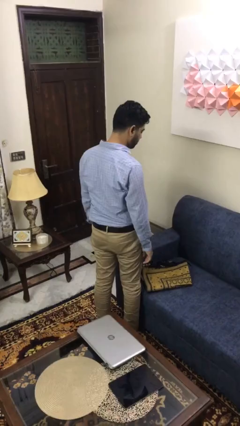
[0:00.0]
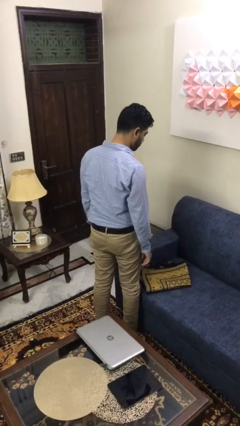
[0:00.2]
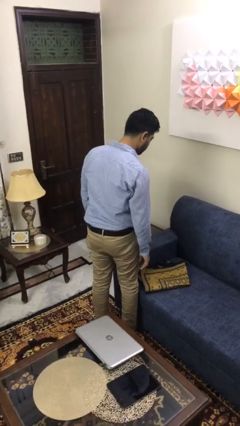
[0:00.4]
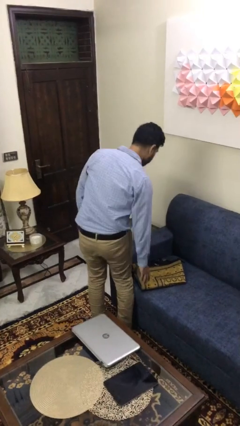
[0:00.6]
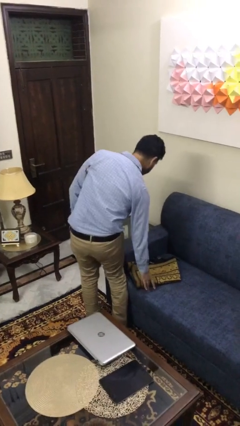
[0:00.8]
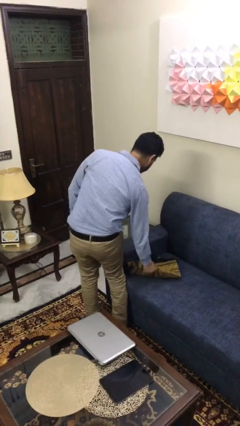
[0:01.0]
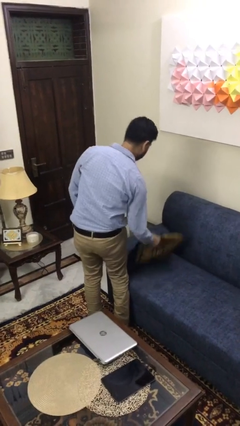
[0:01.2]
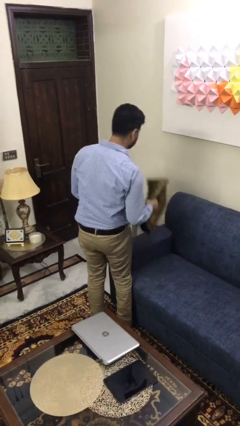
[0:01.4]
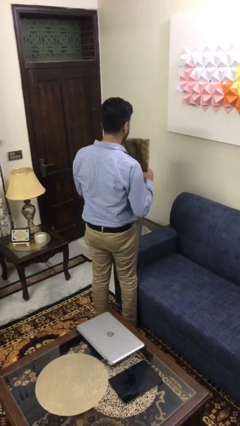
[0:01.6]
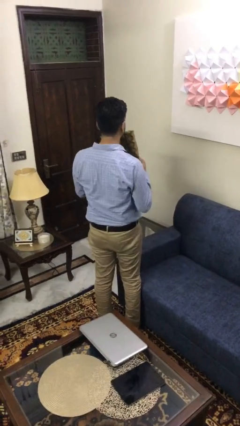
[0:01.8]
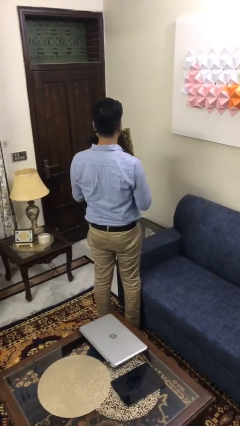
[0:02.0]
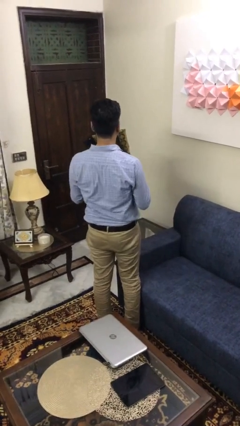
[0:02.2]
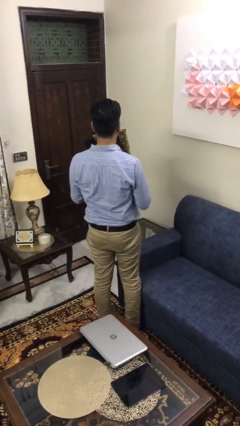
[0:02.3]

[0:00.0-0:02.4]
person picks up object from couch

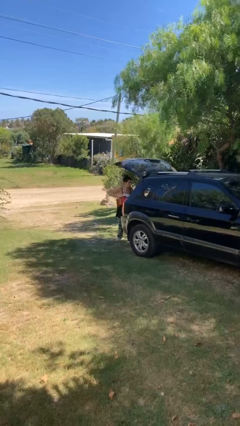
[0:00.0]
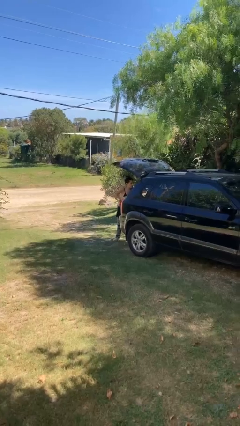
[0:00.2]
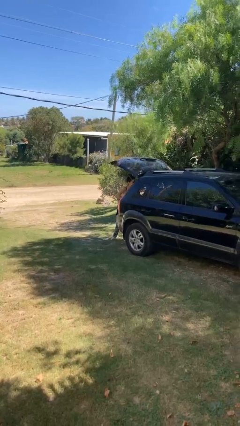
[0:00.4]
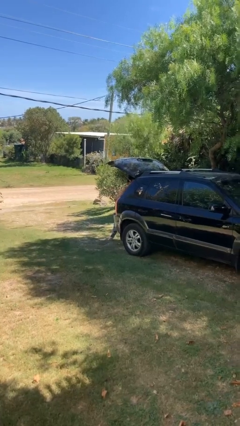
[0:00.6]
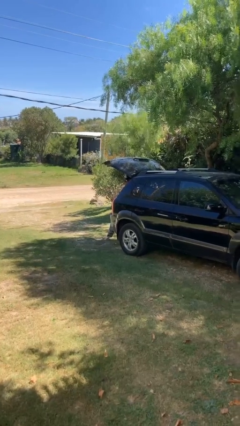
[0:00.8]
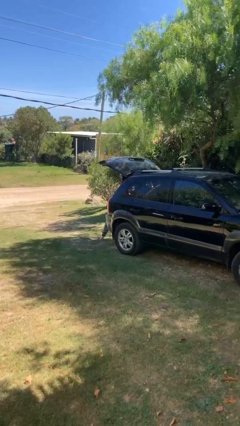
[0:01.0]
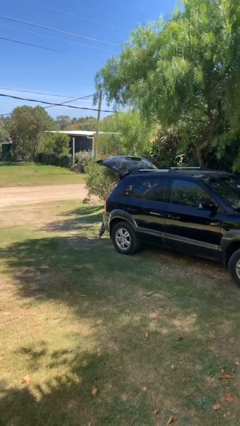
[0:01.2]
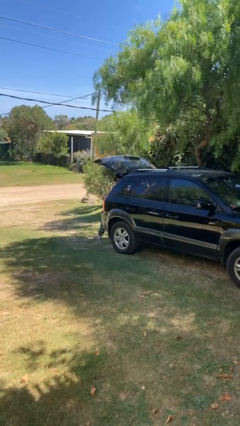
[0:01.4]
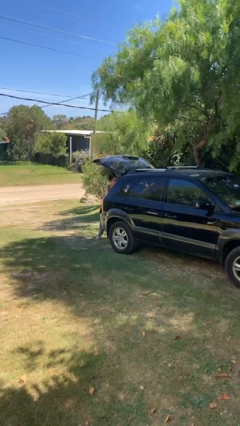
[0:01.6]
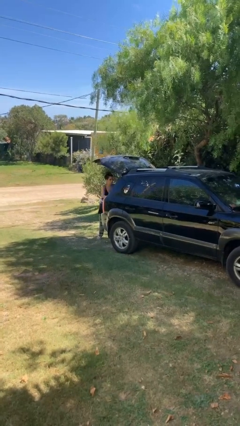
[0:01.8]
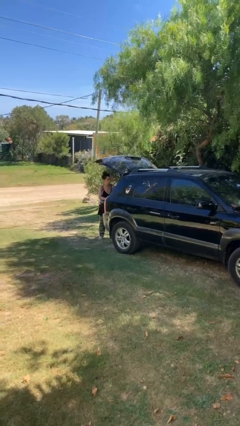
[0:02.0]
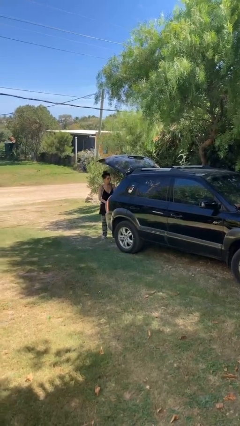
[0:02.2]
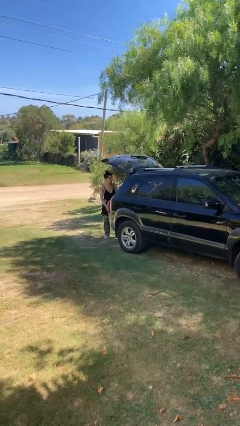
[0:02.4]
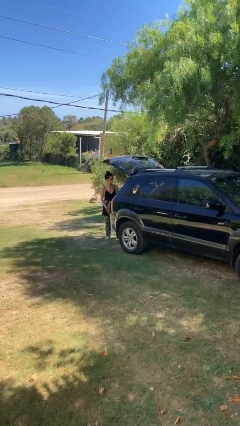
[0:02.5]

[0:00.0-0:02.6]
person loads car

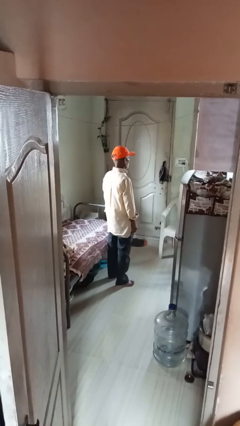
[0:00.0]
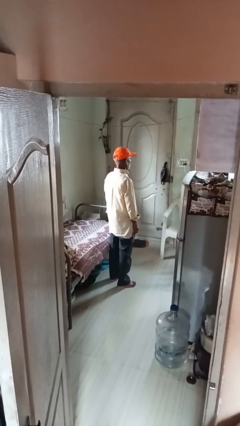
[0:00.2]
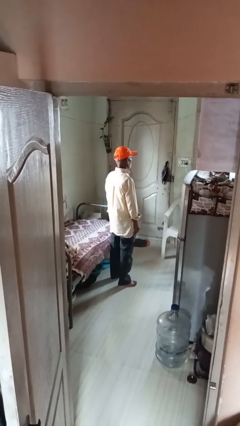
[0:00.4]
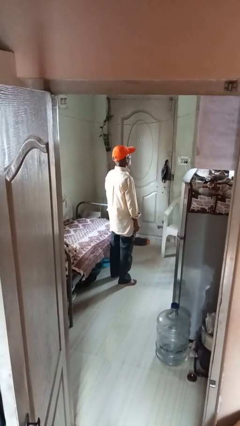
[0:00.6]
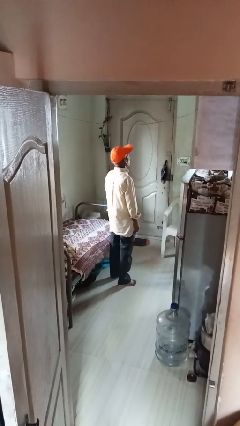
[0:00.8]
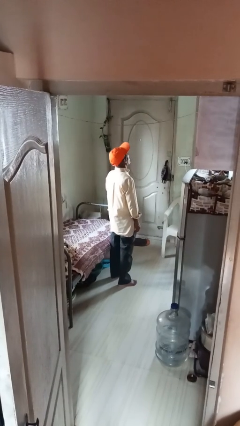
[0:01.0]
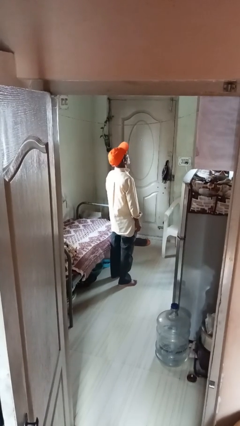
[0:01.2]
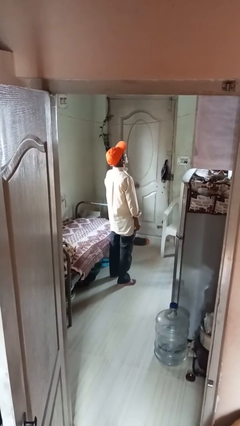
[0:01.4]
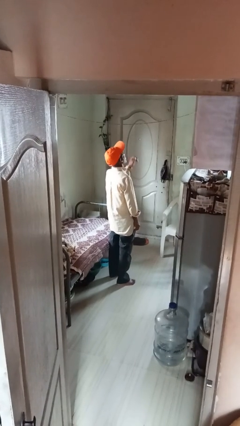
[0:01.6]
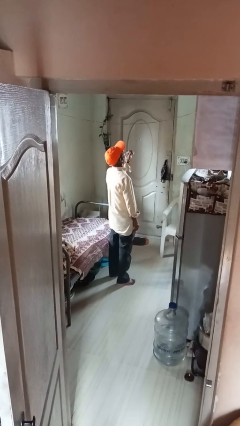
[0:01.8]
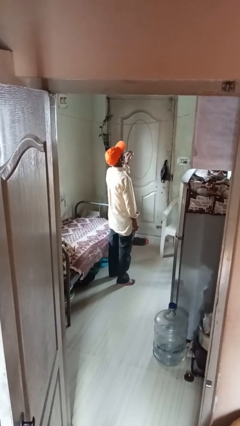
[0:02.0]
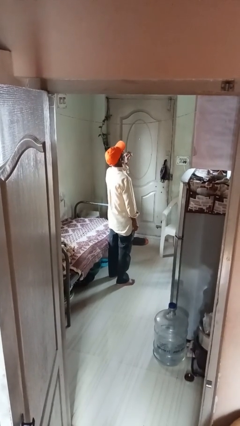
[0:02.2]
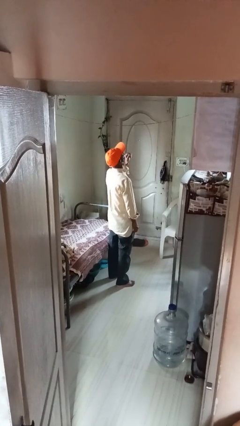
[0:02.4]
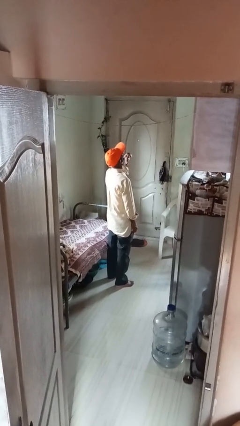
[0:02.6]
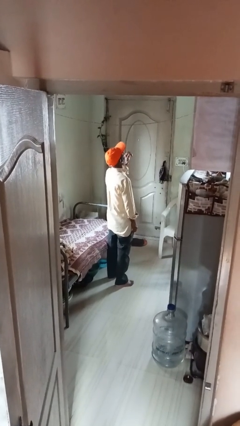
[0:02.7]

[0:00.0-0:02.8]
person yawns

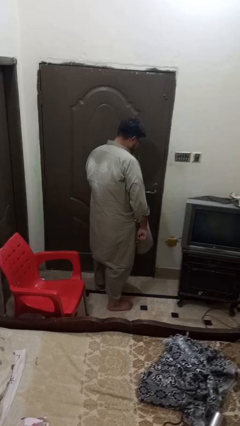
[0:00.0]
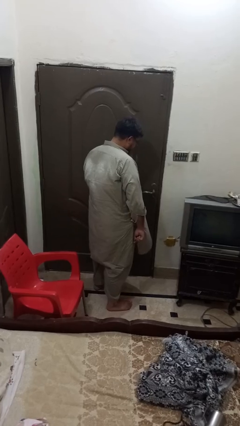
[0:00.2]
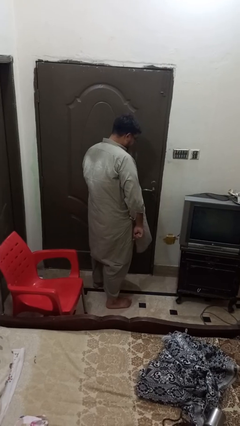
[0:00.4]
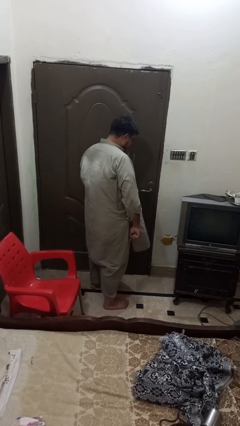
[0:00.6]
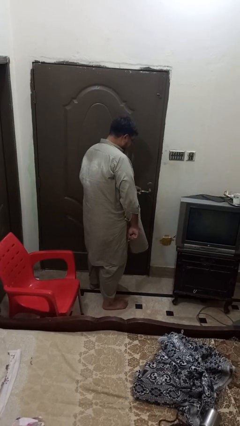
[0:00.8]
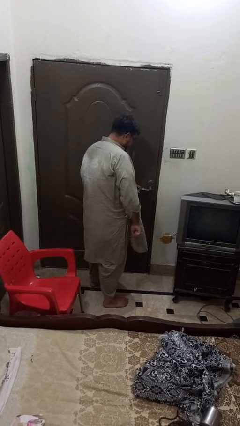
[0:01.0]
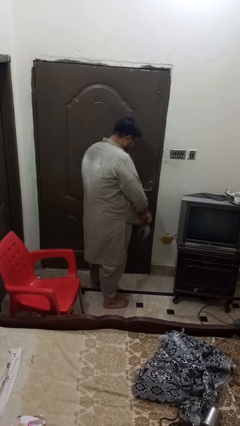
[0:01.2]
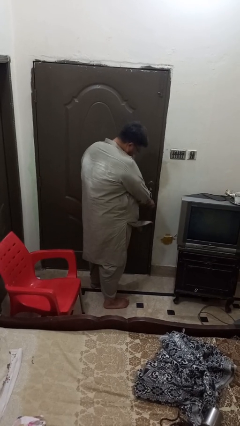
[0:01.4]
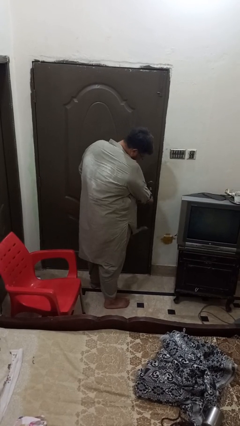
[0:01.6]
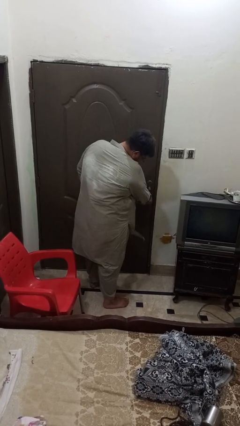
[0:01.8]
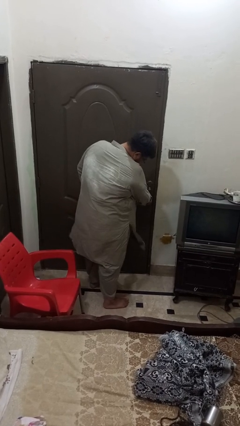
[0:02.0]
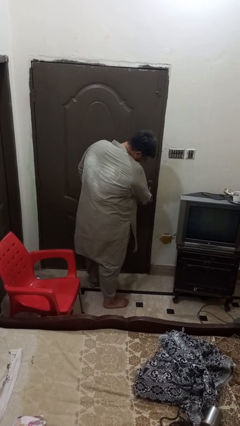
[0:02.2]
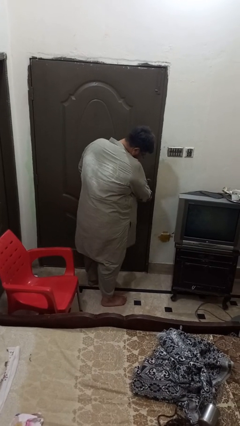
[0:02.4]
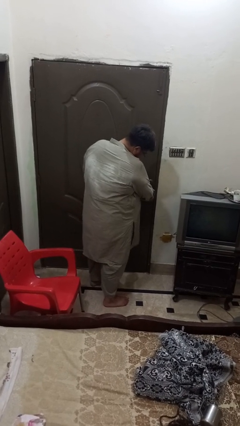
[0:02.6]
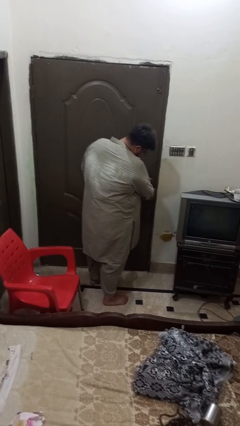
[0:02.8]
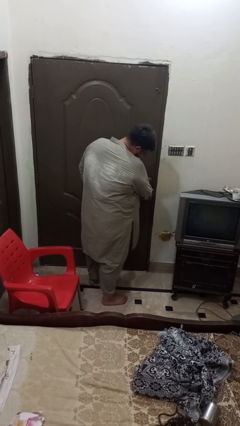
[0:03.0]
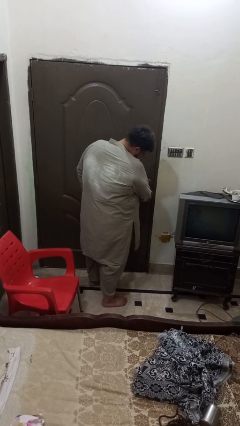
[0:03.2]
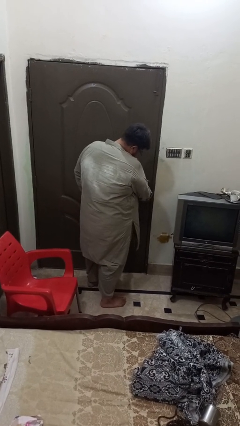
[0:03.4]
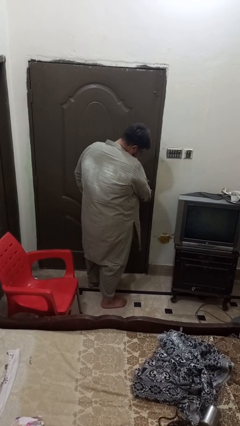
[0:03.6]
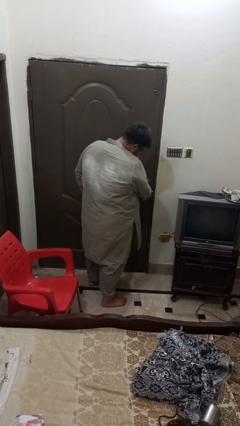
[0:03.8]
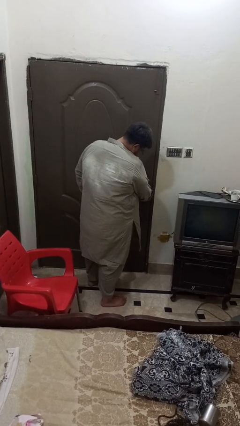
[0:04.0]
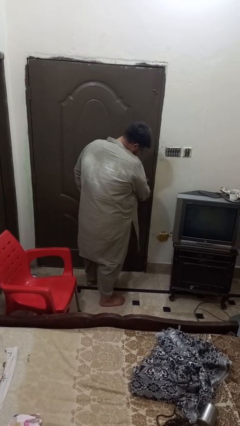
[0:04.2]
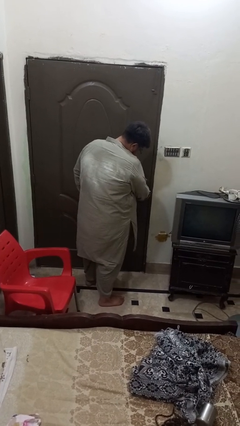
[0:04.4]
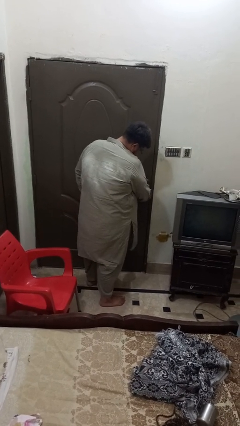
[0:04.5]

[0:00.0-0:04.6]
person unlocks door with keys

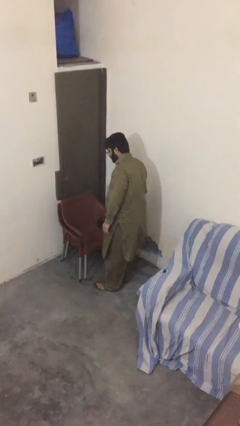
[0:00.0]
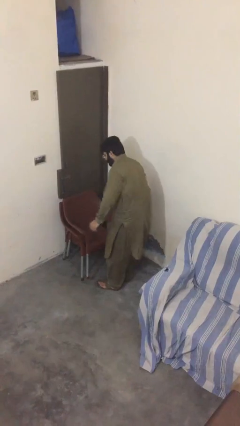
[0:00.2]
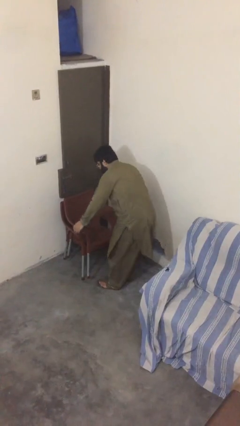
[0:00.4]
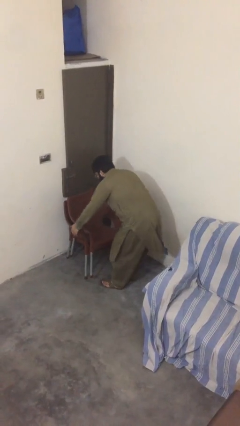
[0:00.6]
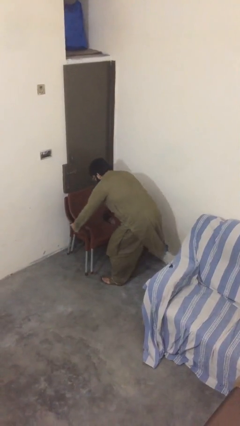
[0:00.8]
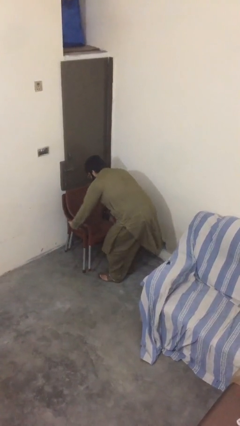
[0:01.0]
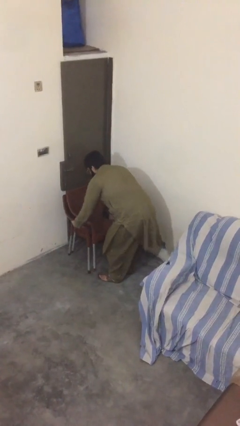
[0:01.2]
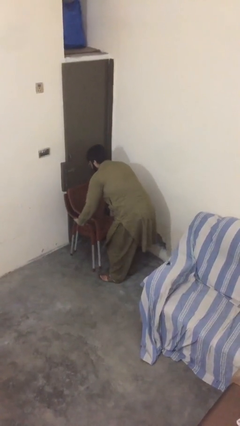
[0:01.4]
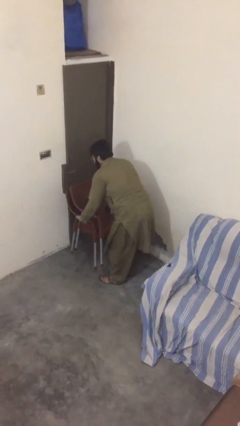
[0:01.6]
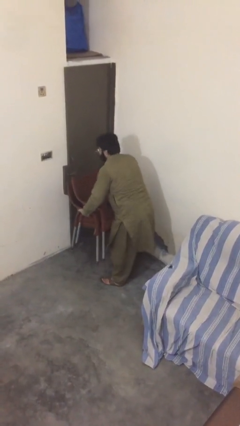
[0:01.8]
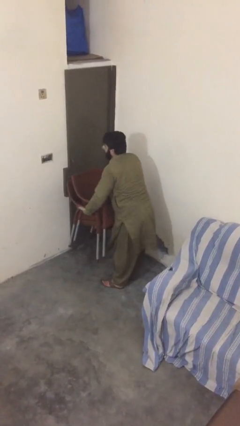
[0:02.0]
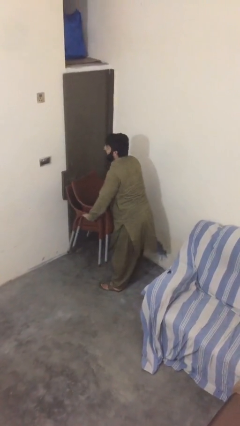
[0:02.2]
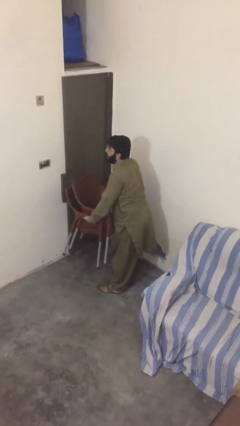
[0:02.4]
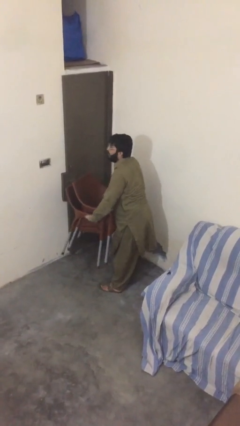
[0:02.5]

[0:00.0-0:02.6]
person picks up object from floor

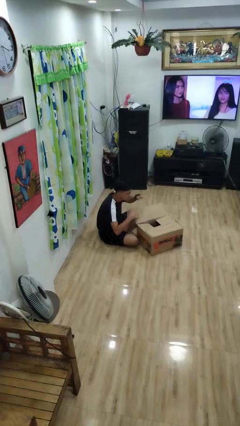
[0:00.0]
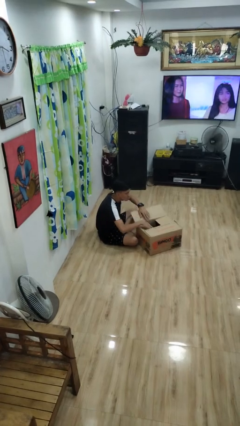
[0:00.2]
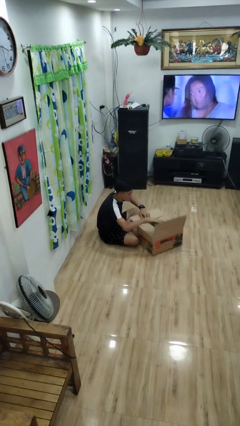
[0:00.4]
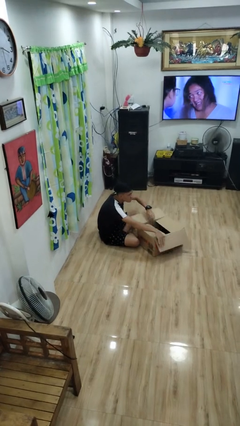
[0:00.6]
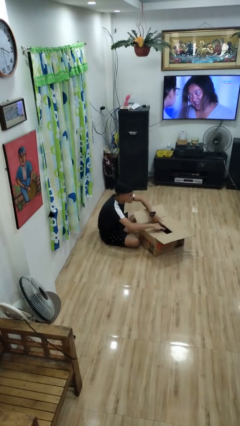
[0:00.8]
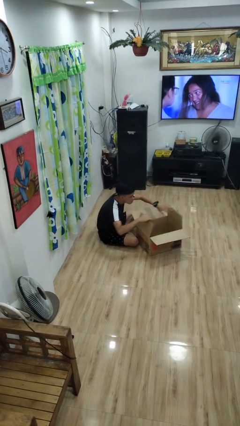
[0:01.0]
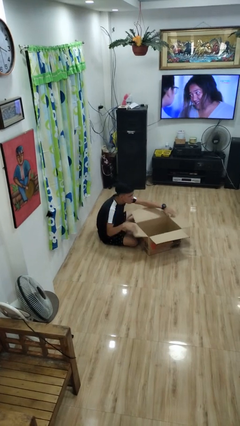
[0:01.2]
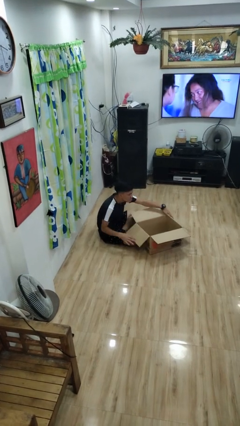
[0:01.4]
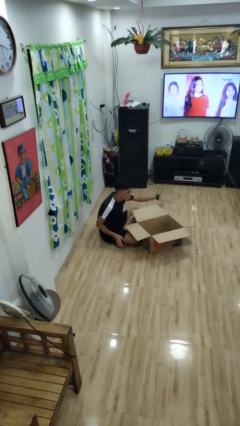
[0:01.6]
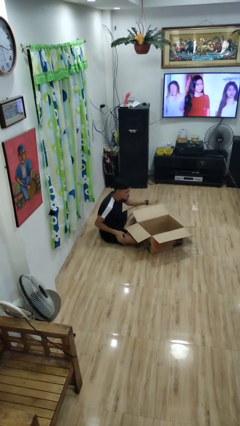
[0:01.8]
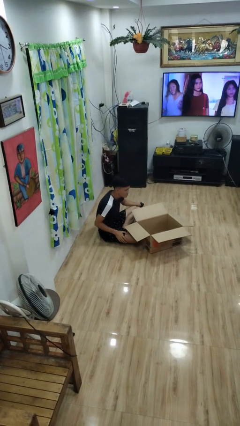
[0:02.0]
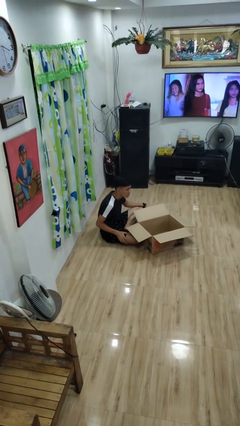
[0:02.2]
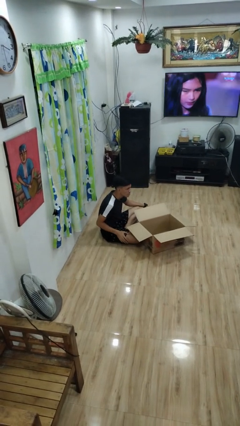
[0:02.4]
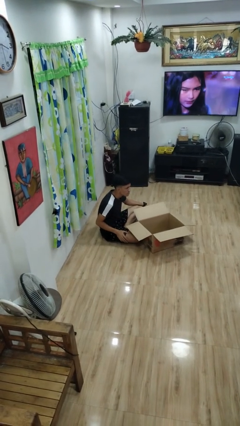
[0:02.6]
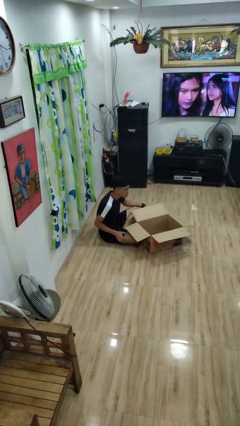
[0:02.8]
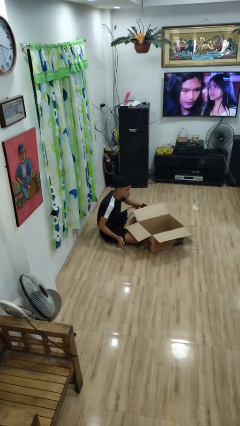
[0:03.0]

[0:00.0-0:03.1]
person opens box
